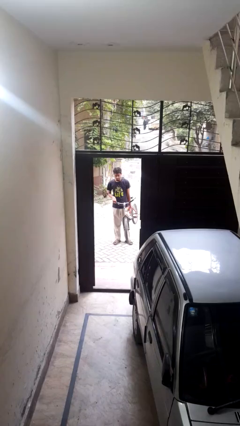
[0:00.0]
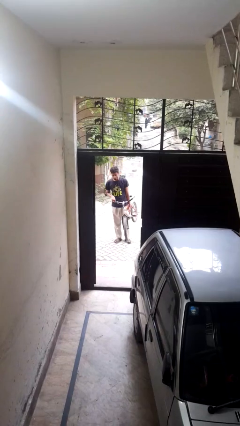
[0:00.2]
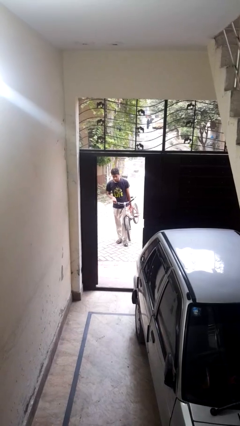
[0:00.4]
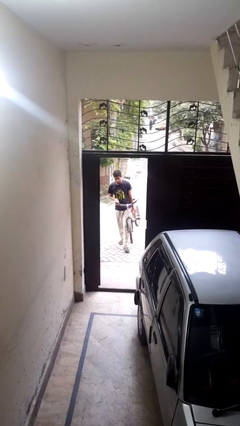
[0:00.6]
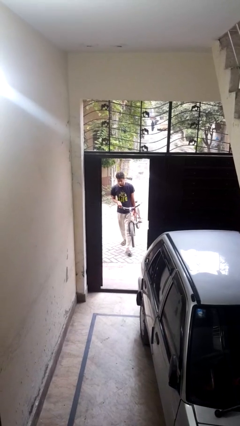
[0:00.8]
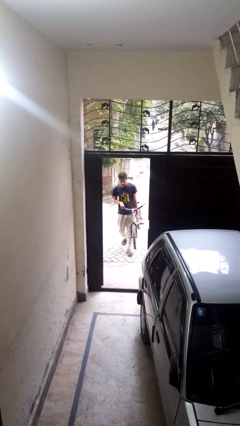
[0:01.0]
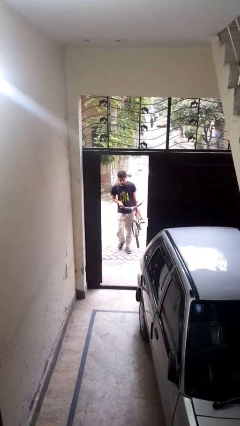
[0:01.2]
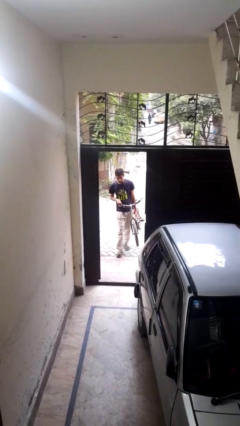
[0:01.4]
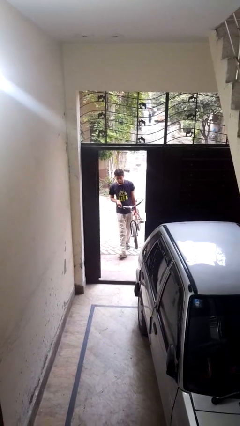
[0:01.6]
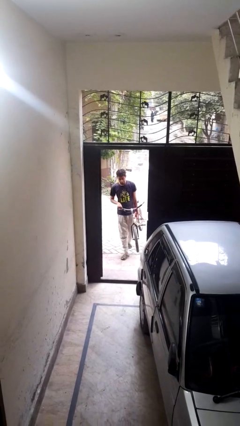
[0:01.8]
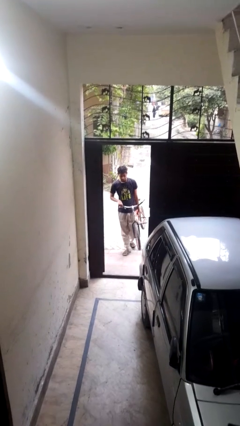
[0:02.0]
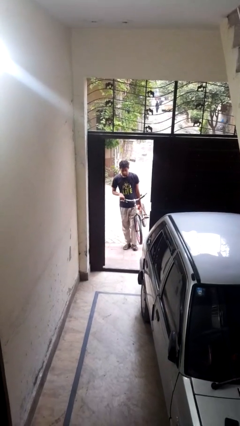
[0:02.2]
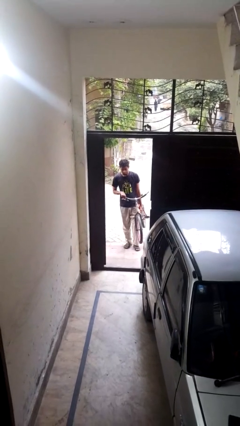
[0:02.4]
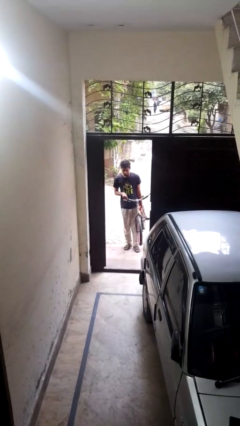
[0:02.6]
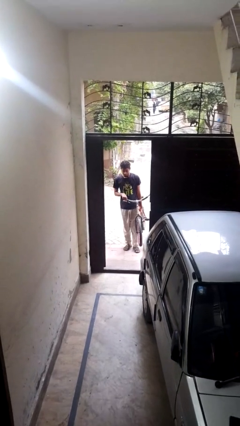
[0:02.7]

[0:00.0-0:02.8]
person carries bicycle

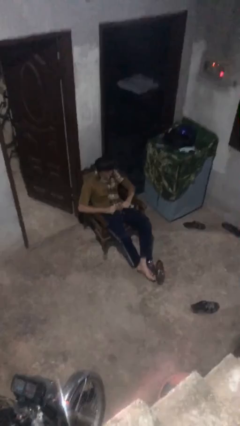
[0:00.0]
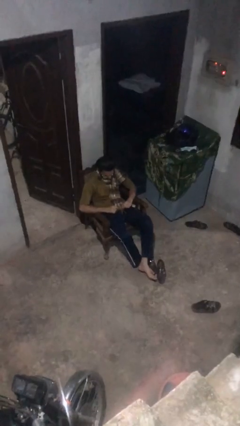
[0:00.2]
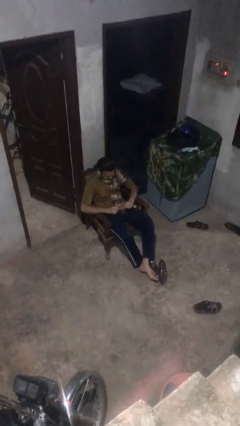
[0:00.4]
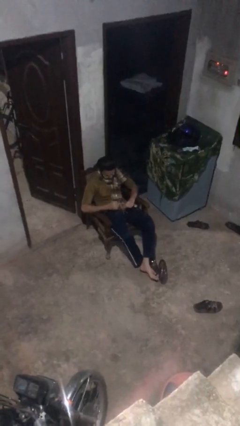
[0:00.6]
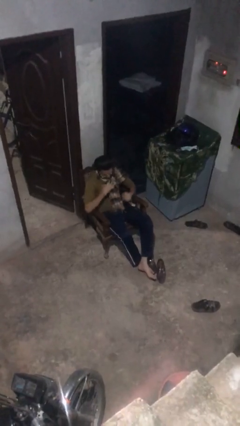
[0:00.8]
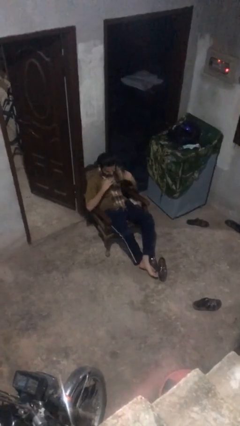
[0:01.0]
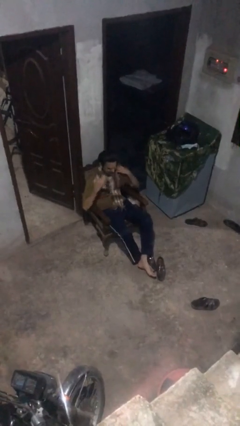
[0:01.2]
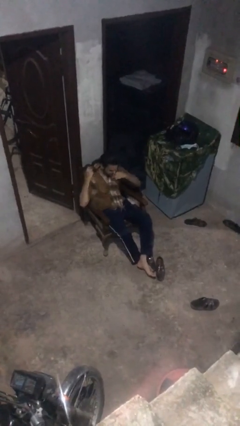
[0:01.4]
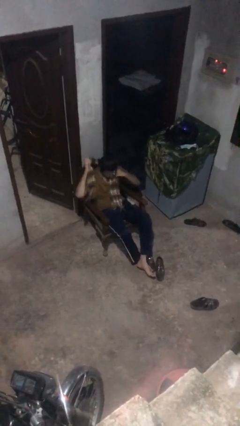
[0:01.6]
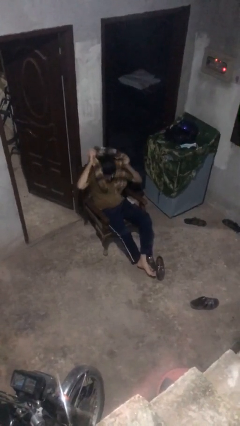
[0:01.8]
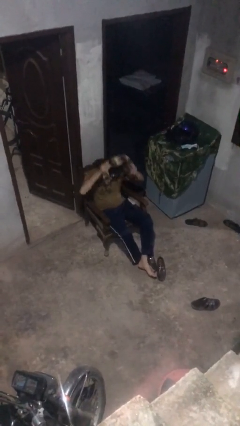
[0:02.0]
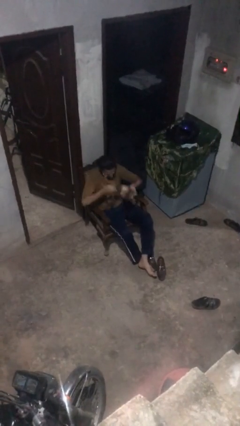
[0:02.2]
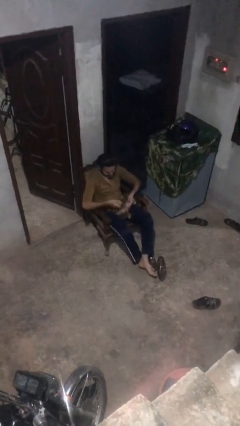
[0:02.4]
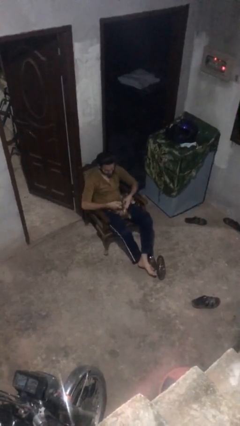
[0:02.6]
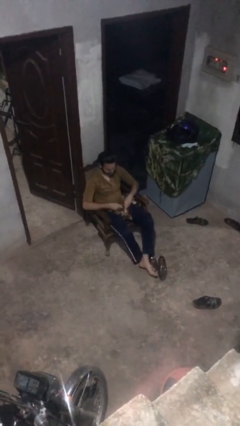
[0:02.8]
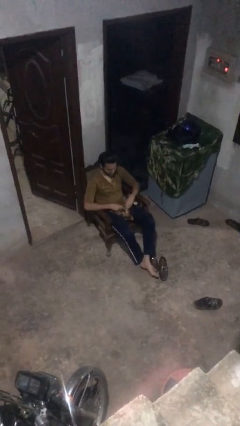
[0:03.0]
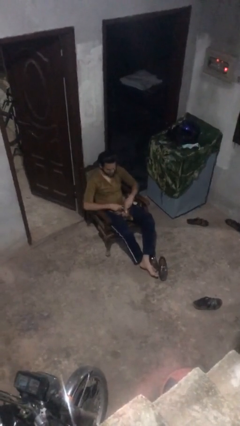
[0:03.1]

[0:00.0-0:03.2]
person takes off scarf

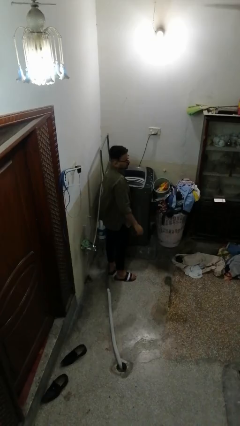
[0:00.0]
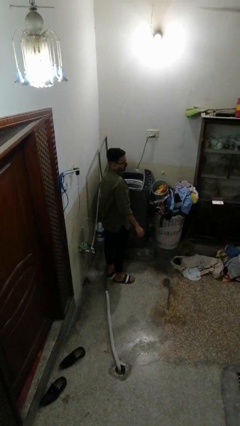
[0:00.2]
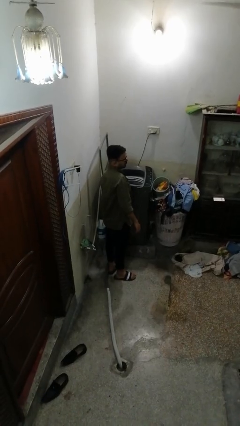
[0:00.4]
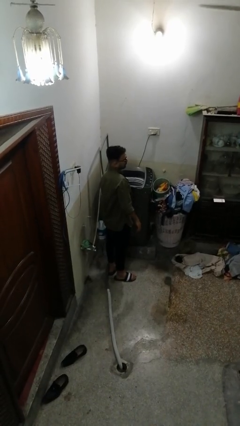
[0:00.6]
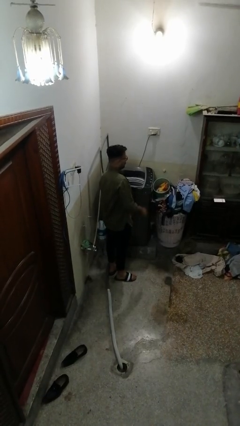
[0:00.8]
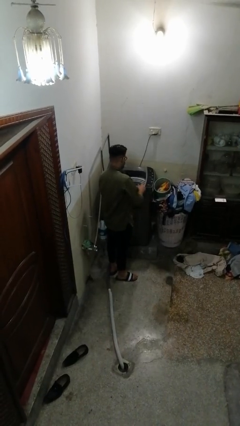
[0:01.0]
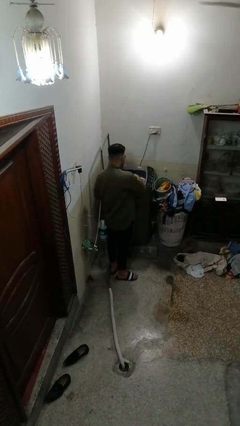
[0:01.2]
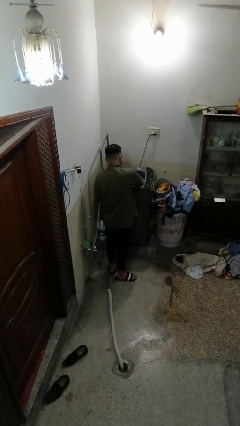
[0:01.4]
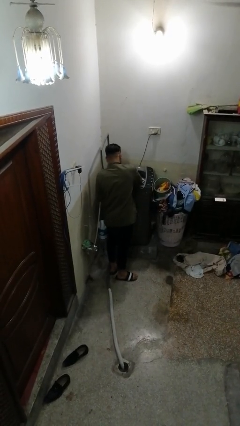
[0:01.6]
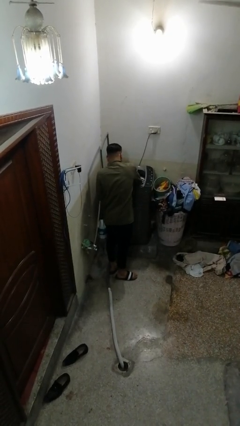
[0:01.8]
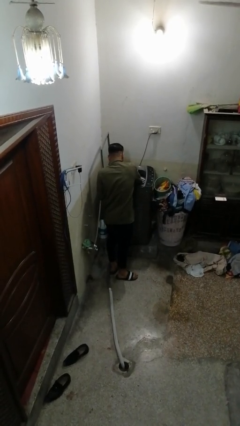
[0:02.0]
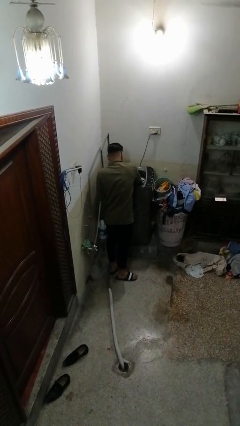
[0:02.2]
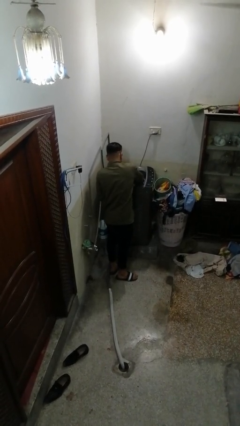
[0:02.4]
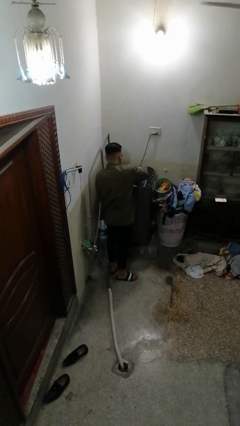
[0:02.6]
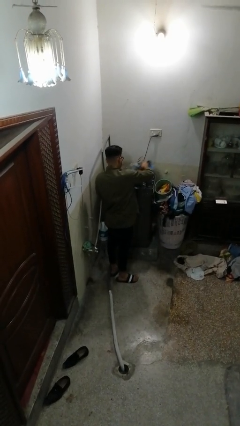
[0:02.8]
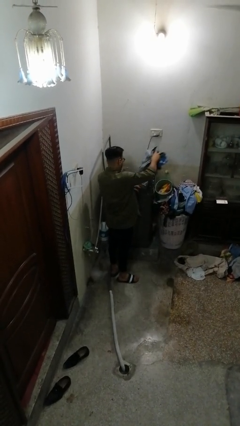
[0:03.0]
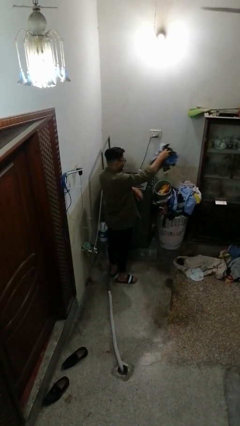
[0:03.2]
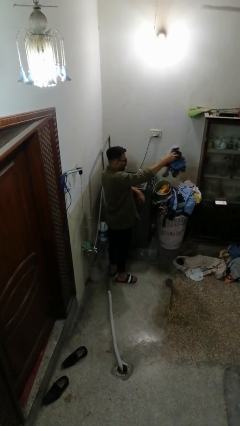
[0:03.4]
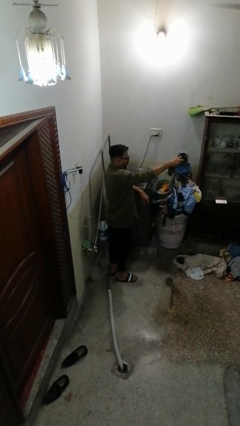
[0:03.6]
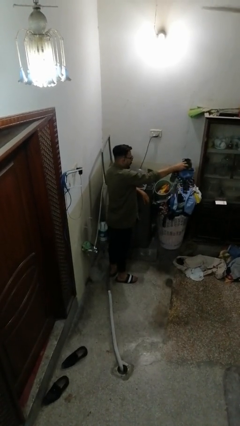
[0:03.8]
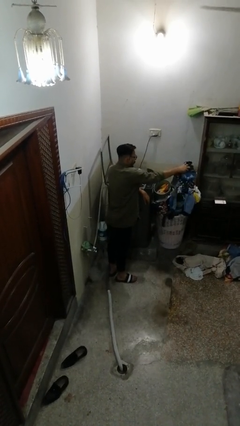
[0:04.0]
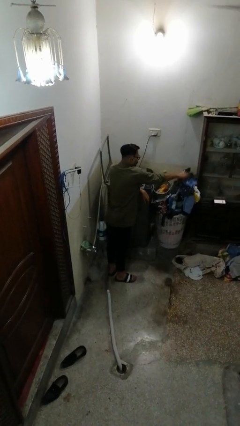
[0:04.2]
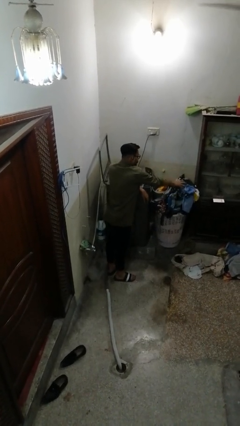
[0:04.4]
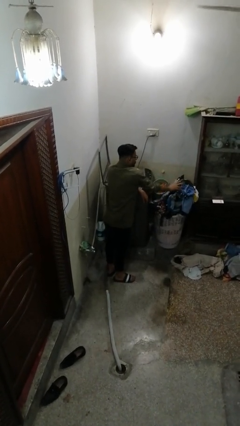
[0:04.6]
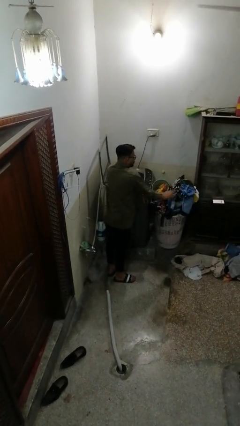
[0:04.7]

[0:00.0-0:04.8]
person unloads clotheswasher

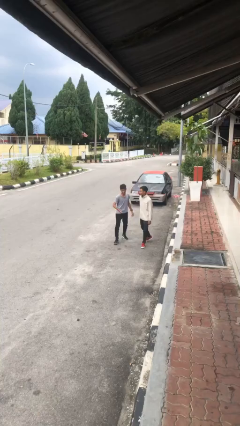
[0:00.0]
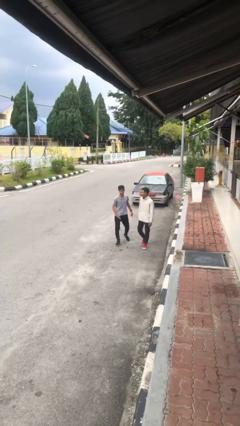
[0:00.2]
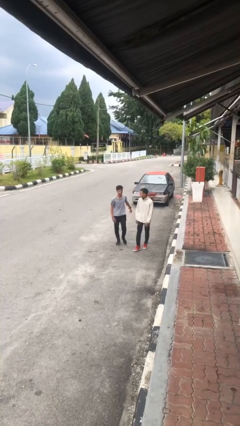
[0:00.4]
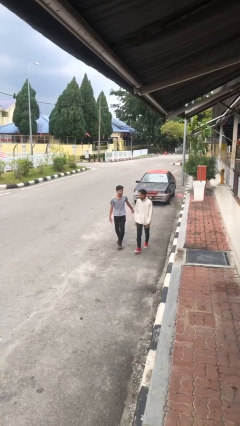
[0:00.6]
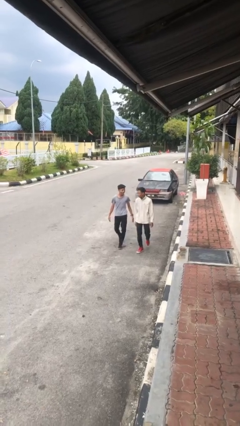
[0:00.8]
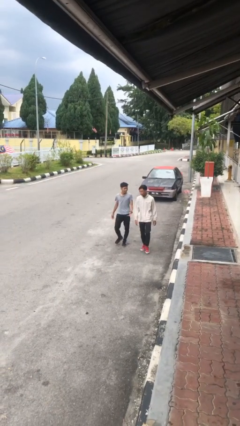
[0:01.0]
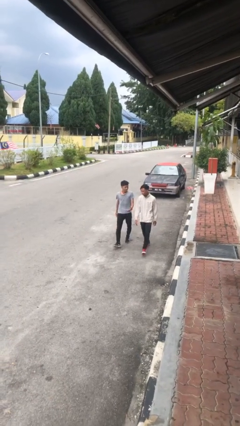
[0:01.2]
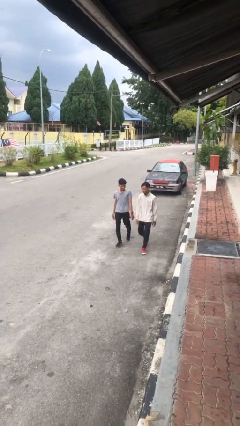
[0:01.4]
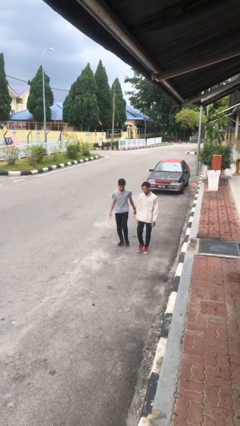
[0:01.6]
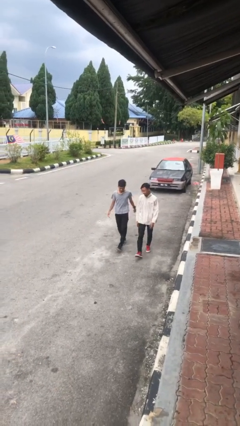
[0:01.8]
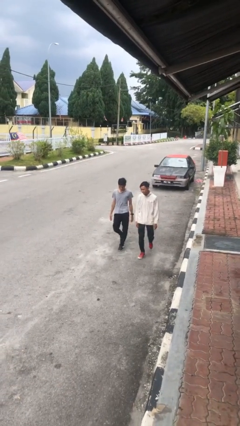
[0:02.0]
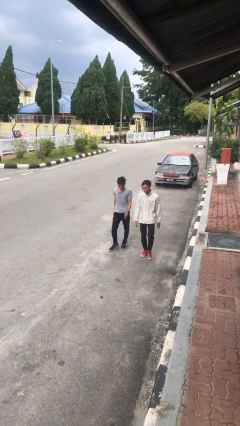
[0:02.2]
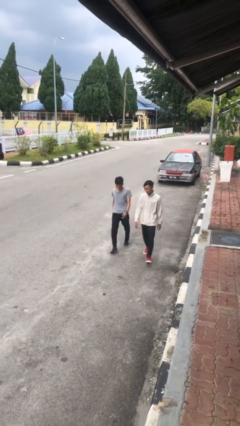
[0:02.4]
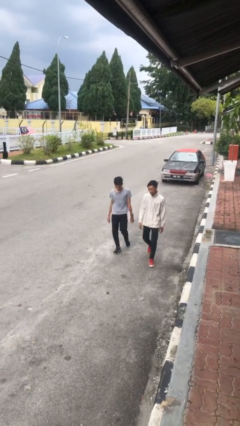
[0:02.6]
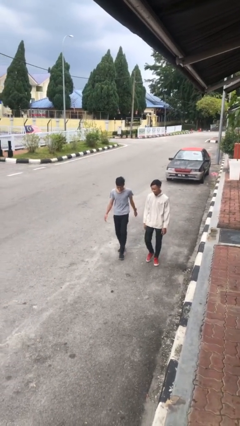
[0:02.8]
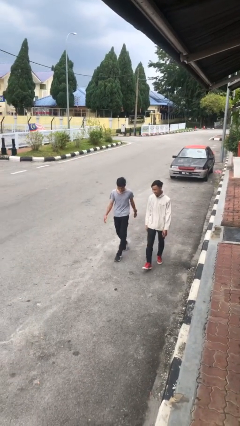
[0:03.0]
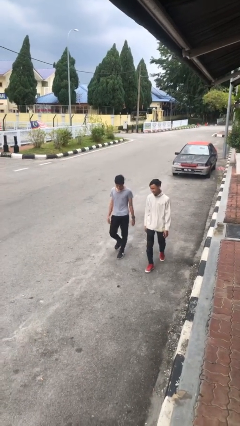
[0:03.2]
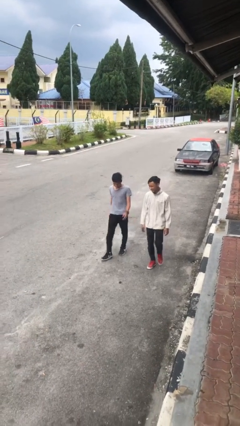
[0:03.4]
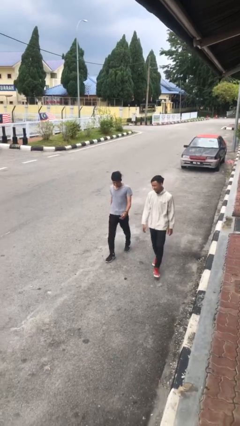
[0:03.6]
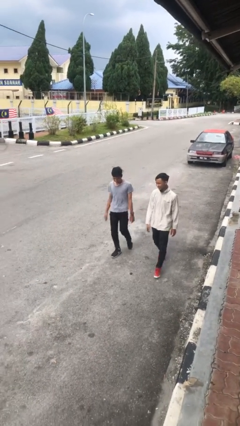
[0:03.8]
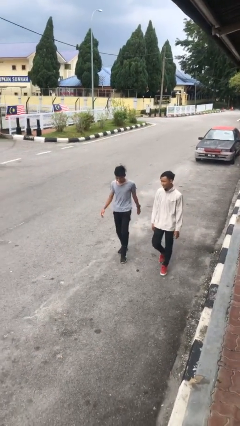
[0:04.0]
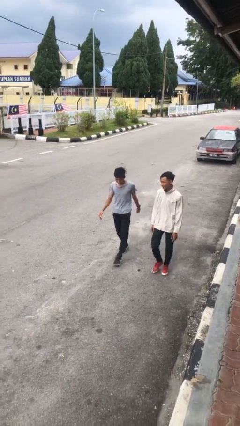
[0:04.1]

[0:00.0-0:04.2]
person talks to person

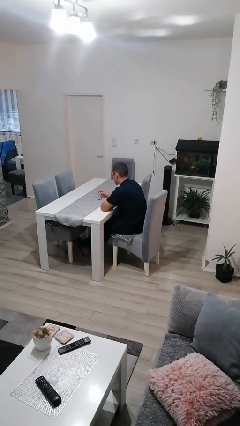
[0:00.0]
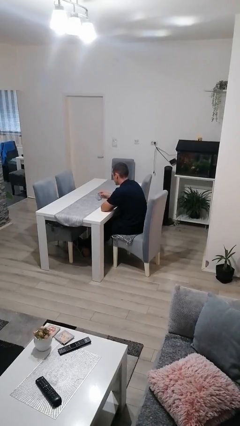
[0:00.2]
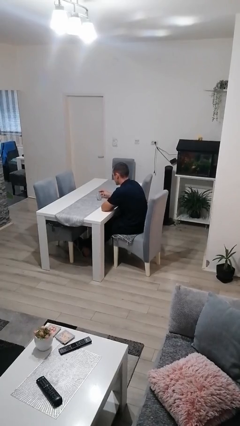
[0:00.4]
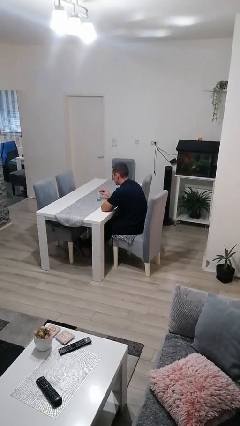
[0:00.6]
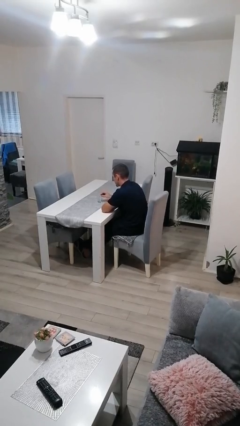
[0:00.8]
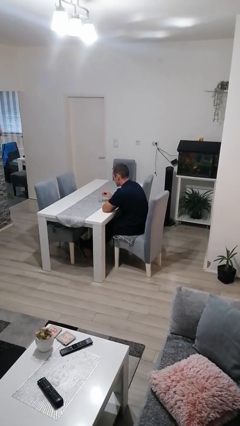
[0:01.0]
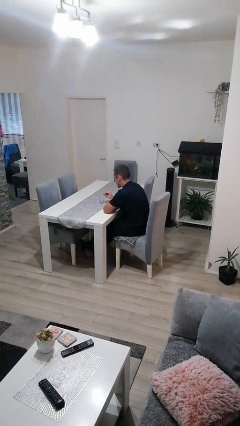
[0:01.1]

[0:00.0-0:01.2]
person sets upright glass

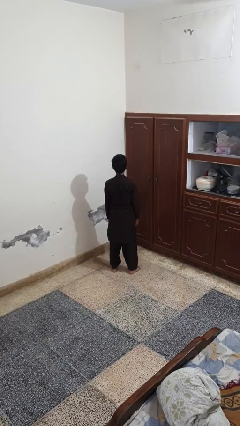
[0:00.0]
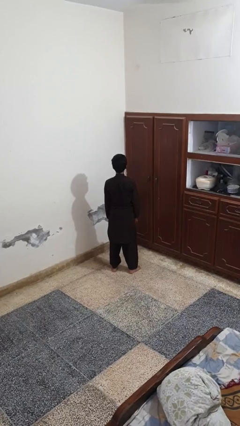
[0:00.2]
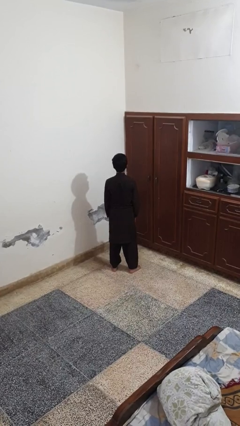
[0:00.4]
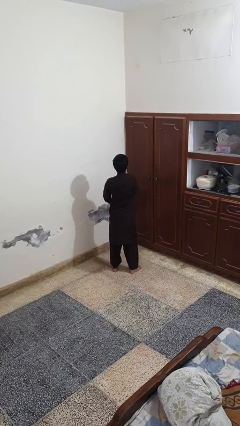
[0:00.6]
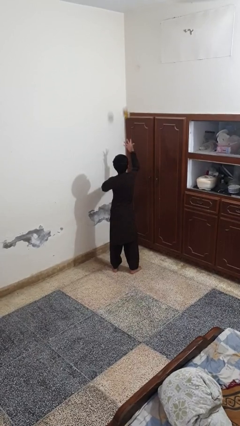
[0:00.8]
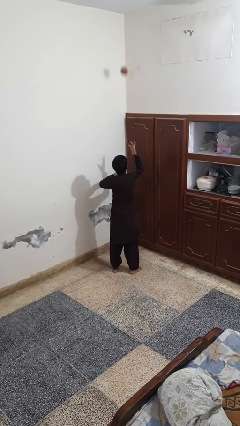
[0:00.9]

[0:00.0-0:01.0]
person drops object
